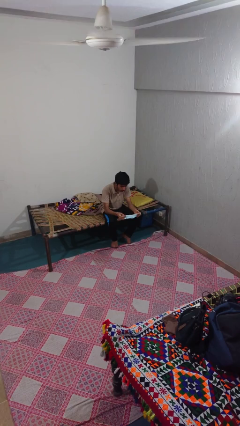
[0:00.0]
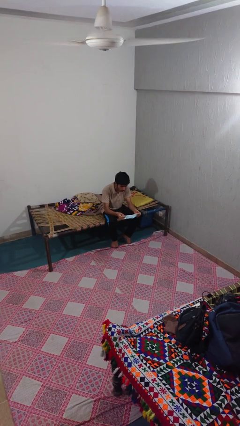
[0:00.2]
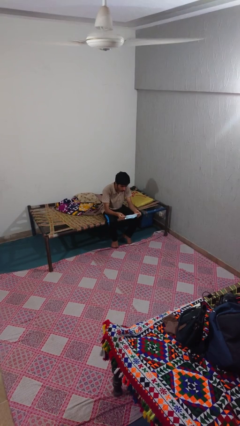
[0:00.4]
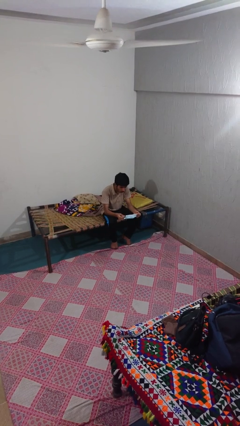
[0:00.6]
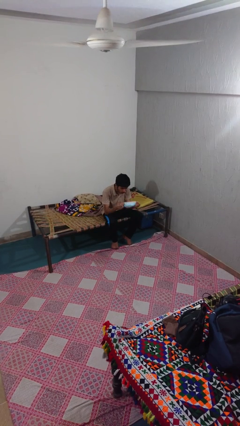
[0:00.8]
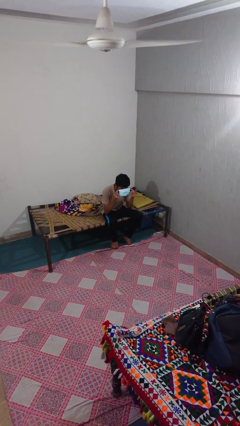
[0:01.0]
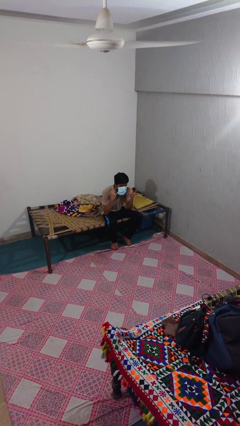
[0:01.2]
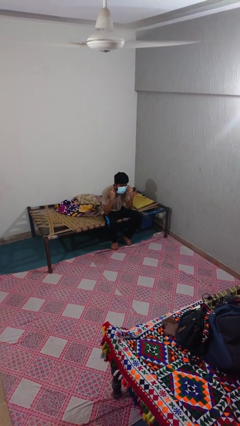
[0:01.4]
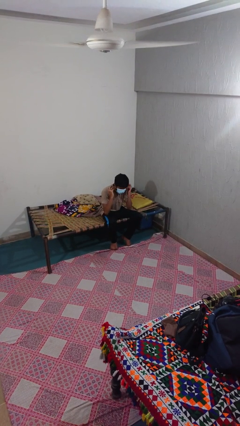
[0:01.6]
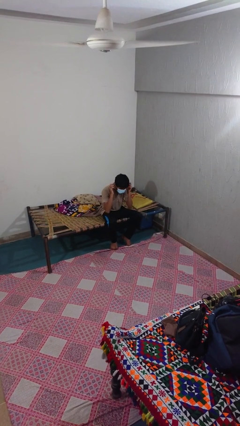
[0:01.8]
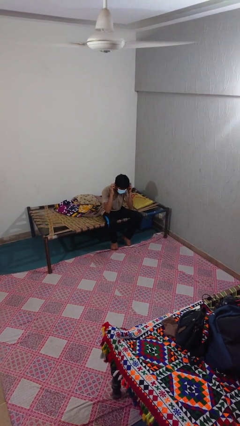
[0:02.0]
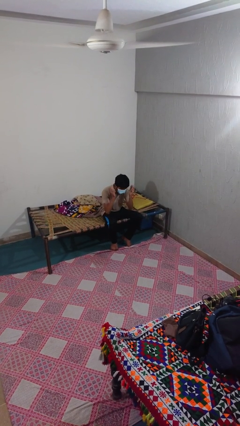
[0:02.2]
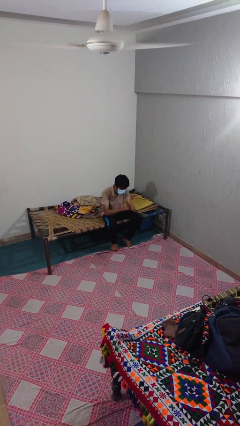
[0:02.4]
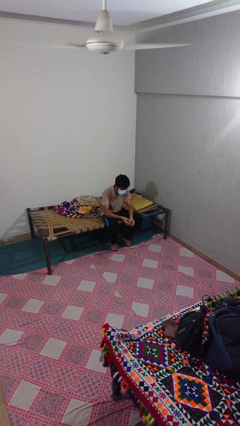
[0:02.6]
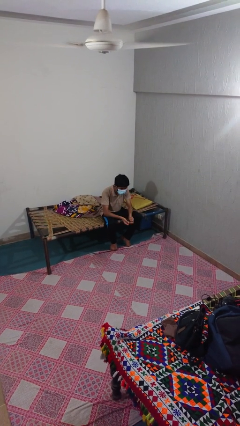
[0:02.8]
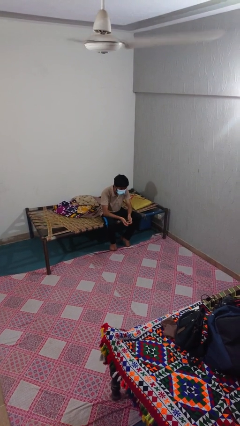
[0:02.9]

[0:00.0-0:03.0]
person puts on facemask

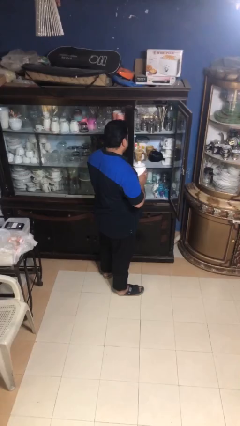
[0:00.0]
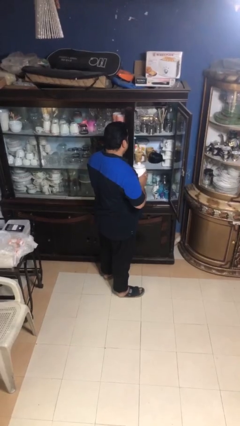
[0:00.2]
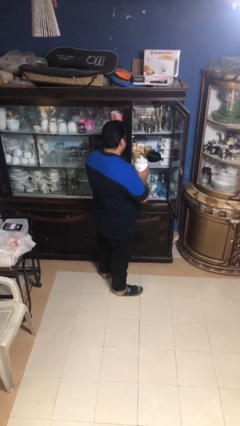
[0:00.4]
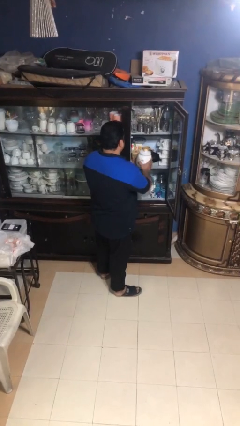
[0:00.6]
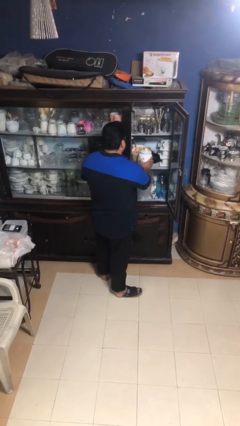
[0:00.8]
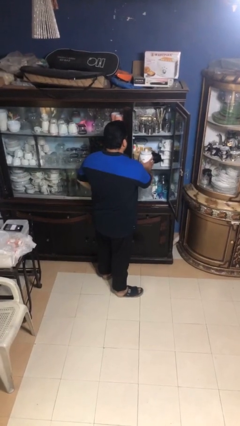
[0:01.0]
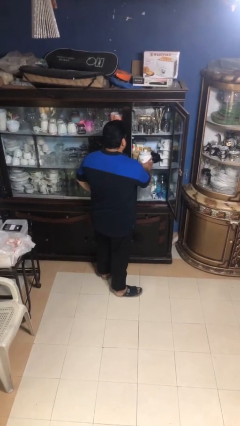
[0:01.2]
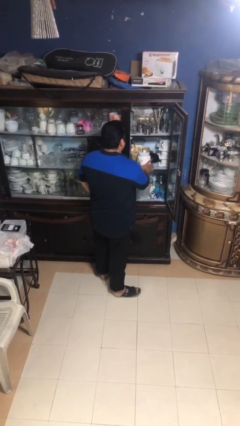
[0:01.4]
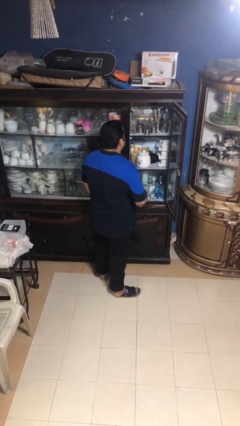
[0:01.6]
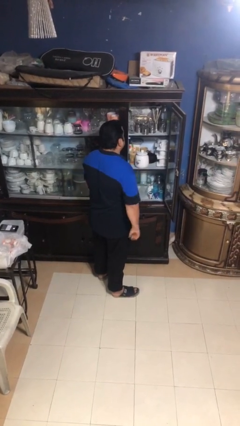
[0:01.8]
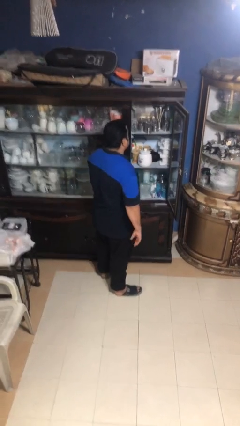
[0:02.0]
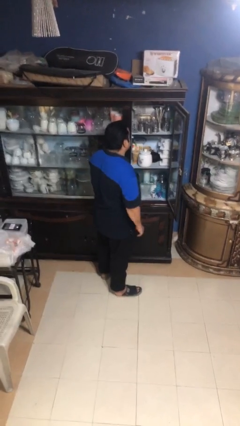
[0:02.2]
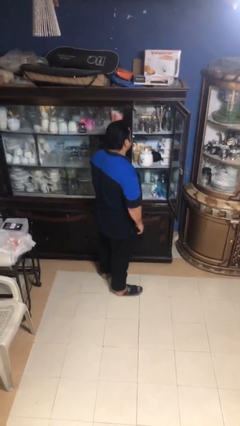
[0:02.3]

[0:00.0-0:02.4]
person puts down object into cabinet

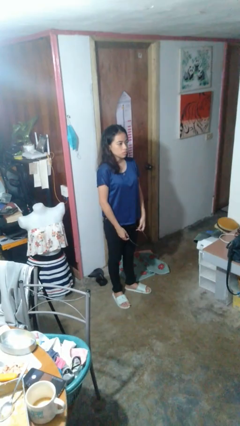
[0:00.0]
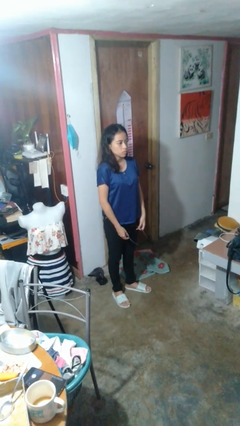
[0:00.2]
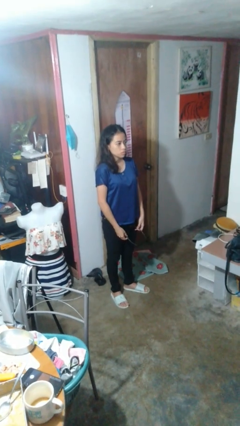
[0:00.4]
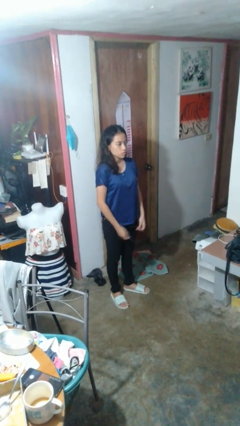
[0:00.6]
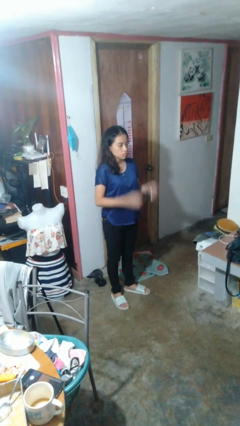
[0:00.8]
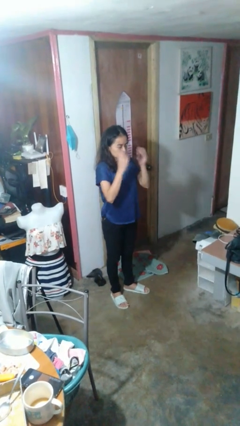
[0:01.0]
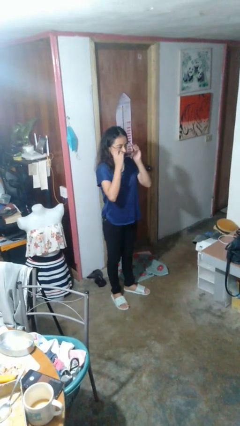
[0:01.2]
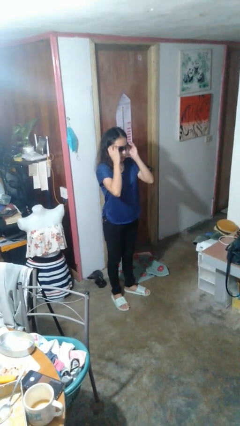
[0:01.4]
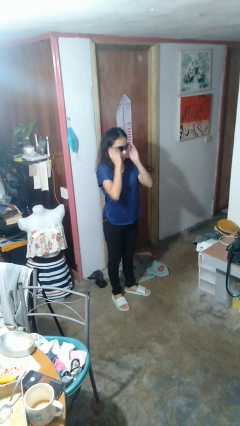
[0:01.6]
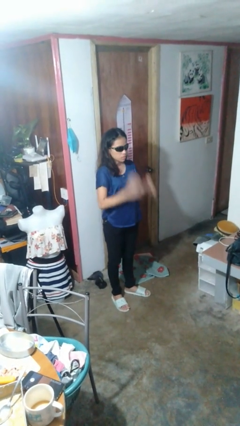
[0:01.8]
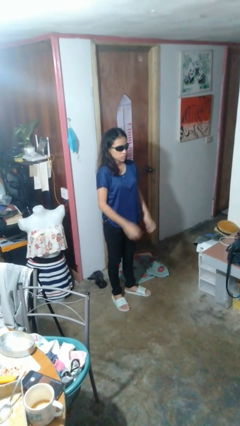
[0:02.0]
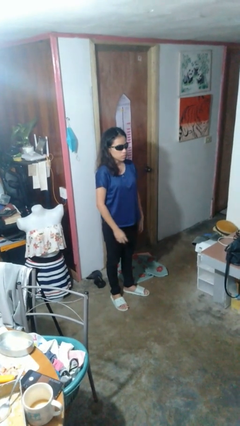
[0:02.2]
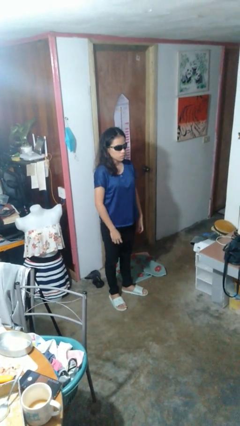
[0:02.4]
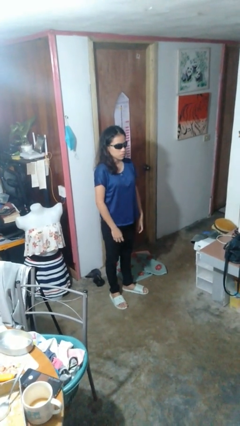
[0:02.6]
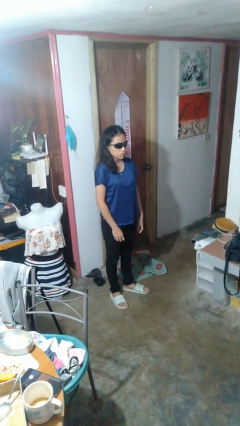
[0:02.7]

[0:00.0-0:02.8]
person puts on sunglasses

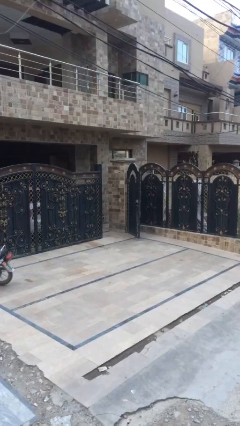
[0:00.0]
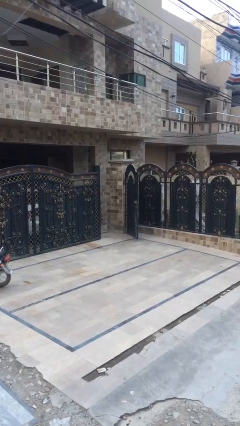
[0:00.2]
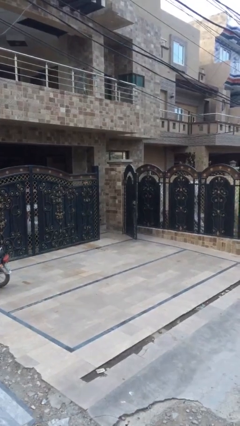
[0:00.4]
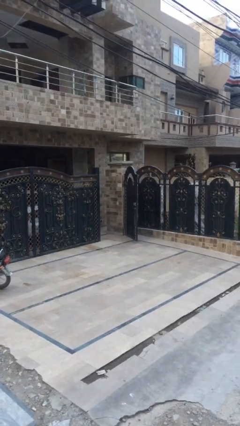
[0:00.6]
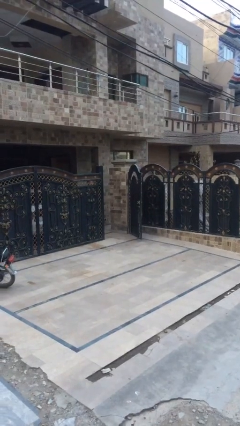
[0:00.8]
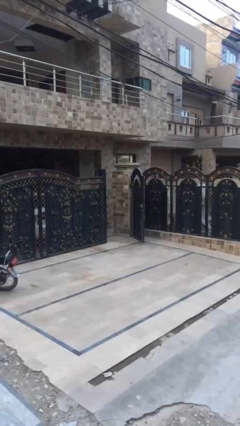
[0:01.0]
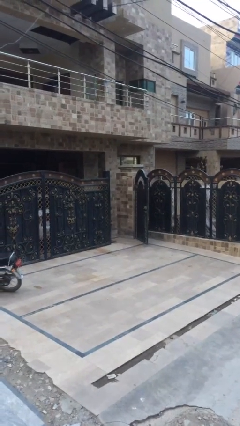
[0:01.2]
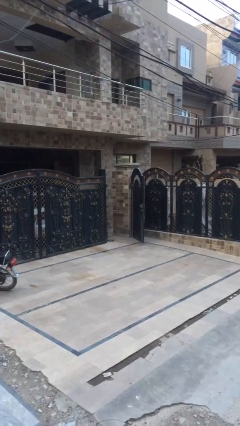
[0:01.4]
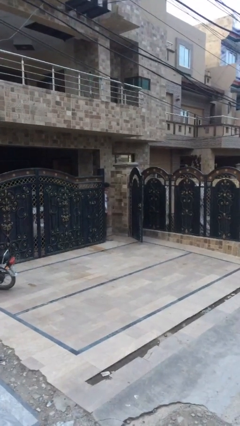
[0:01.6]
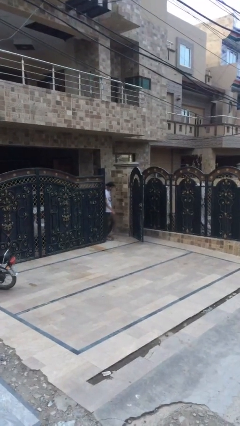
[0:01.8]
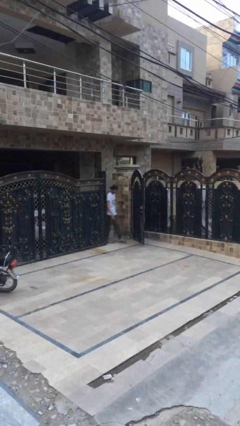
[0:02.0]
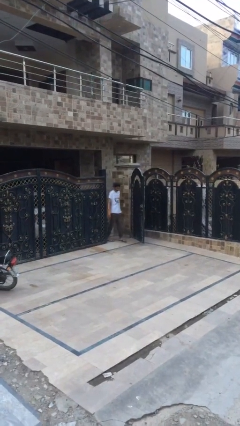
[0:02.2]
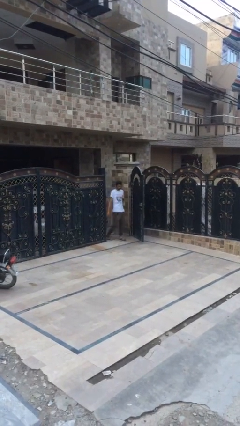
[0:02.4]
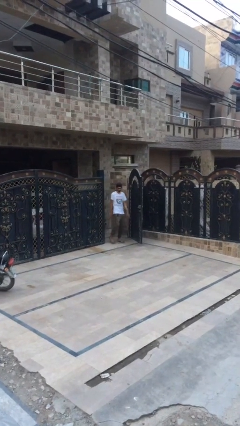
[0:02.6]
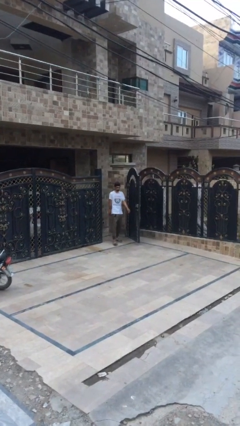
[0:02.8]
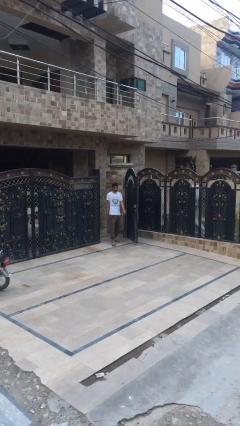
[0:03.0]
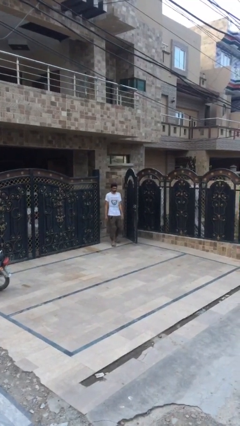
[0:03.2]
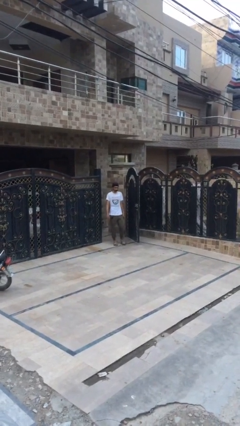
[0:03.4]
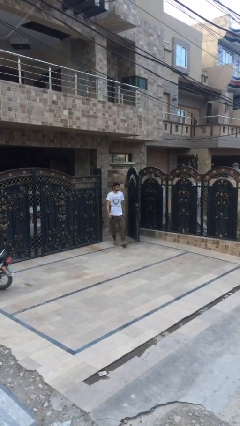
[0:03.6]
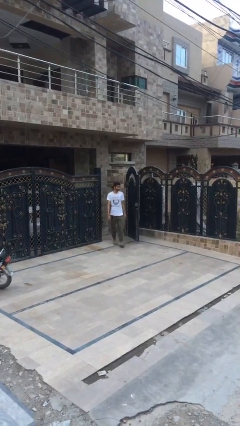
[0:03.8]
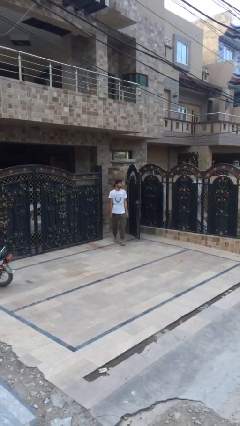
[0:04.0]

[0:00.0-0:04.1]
person enters scene through structure

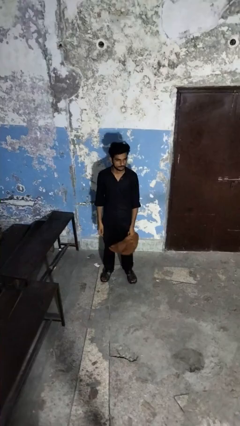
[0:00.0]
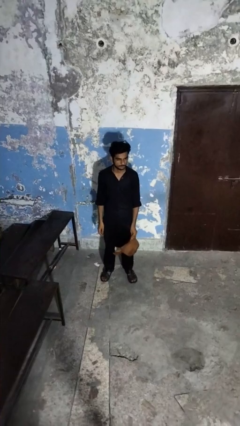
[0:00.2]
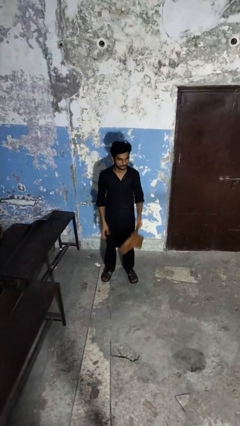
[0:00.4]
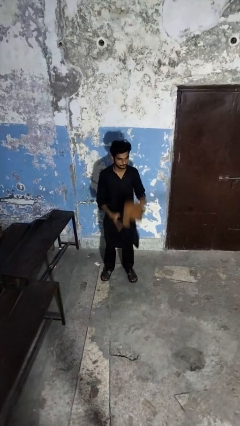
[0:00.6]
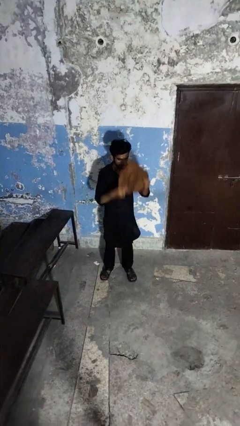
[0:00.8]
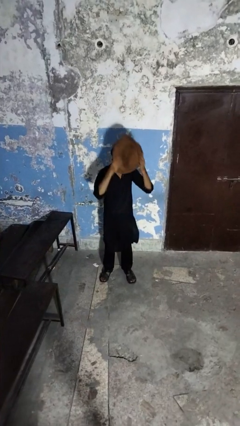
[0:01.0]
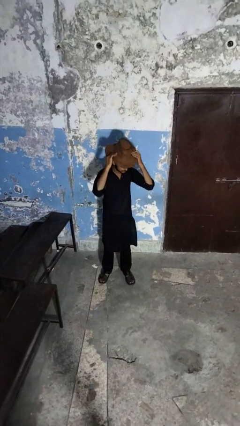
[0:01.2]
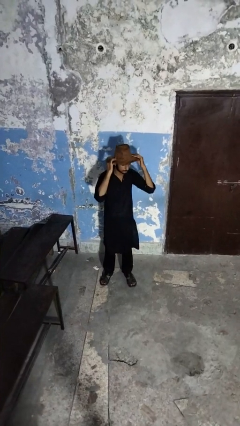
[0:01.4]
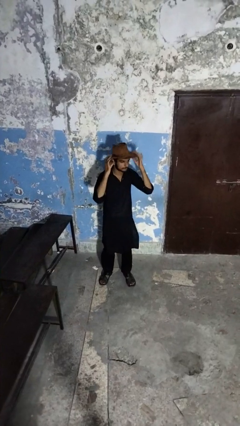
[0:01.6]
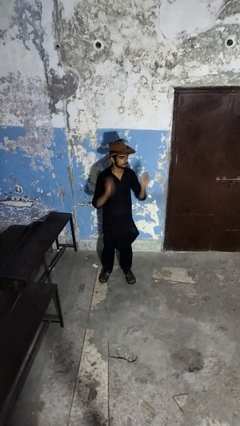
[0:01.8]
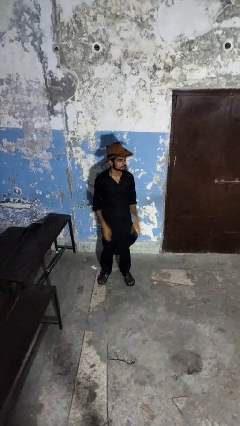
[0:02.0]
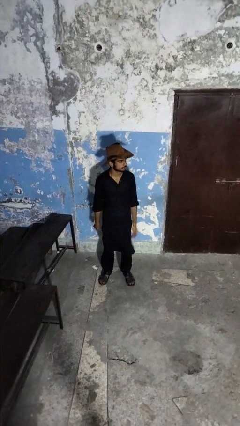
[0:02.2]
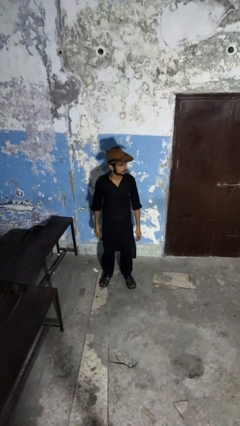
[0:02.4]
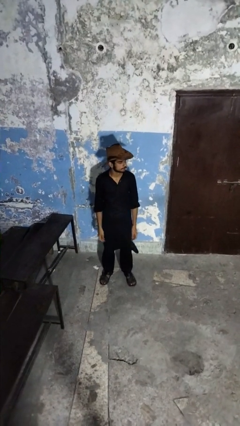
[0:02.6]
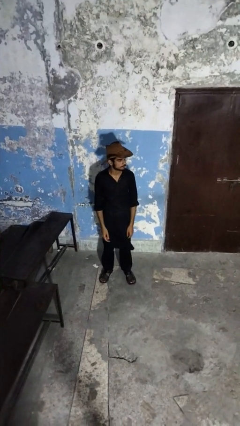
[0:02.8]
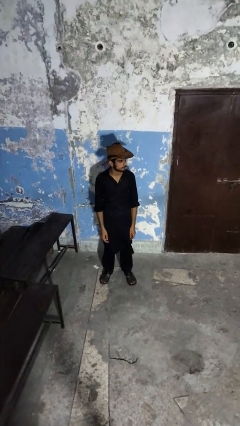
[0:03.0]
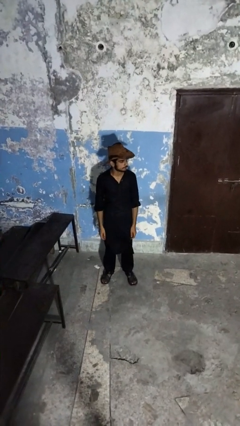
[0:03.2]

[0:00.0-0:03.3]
person puts on hat

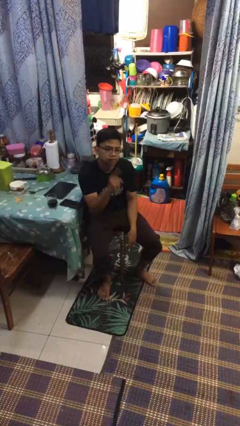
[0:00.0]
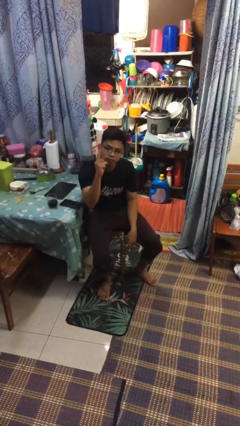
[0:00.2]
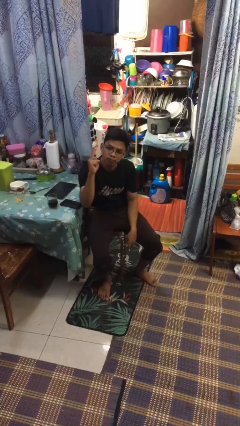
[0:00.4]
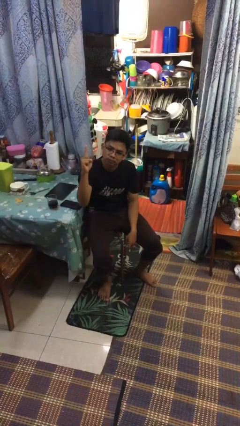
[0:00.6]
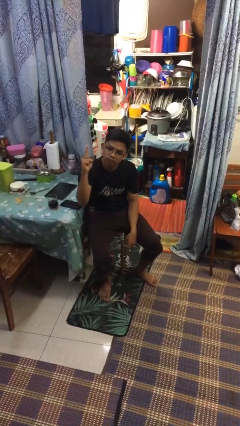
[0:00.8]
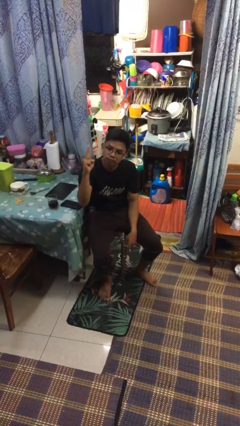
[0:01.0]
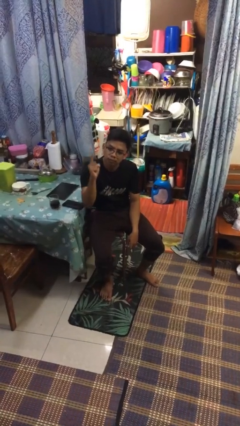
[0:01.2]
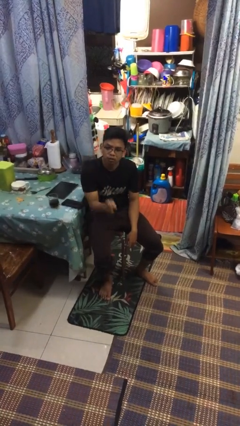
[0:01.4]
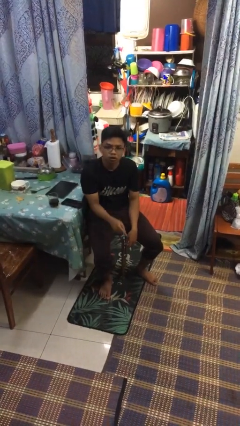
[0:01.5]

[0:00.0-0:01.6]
person gestures number one

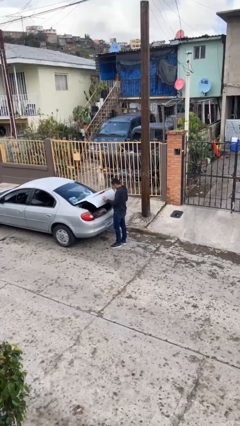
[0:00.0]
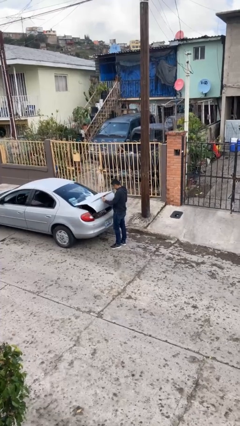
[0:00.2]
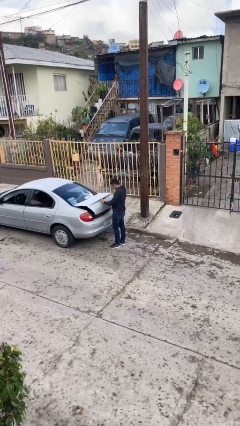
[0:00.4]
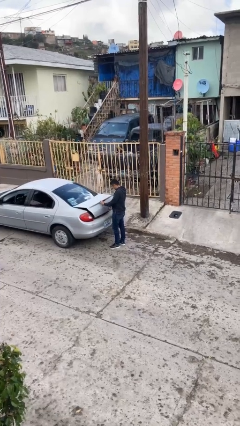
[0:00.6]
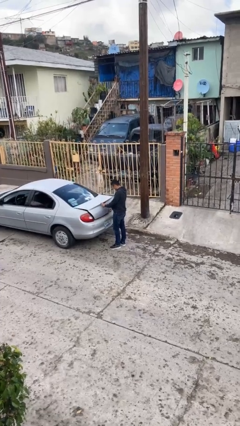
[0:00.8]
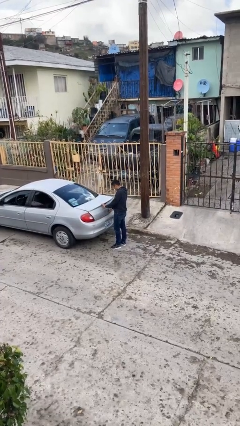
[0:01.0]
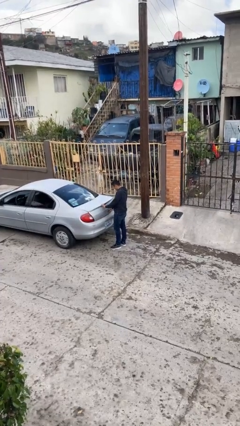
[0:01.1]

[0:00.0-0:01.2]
person closes car trunk
